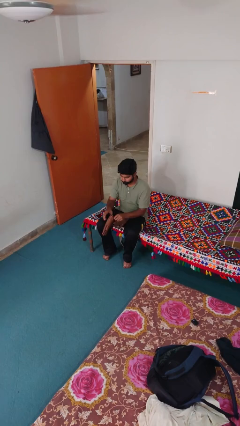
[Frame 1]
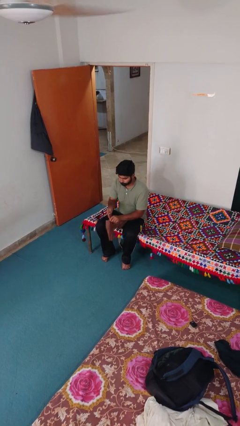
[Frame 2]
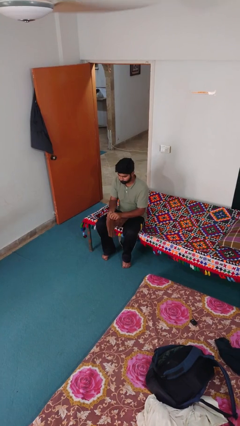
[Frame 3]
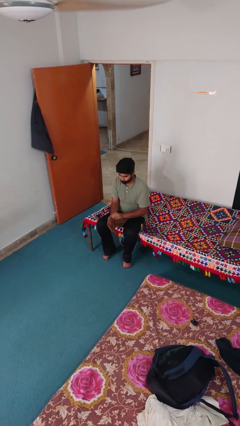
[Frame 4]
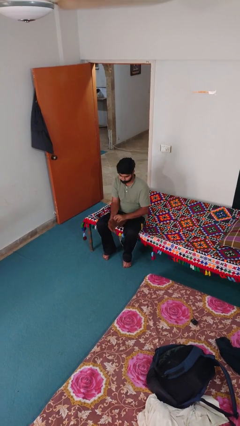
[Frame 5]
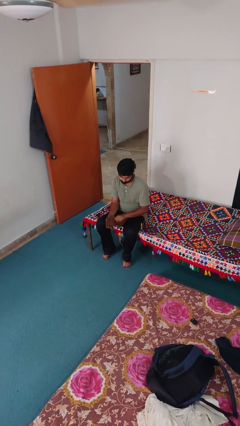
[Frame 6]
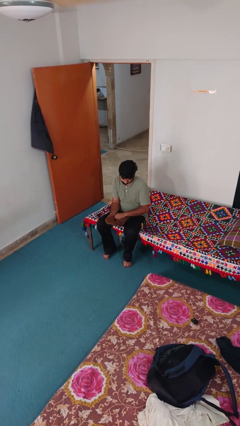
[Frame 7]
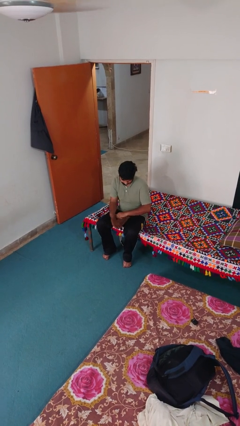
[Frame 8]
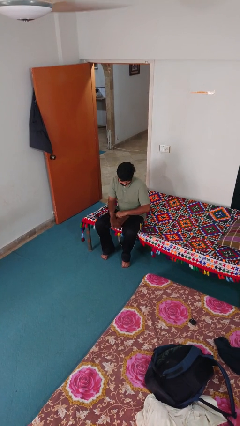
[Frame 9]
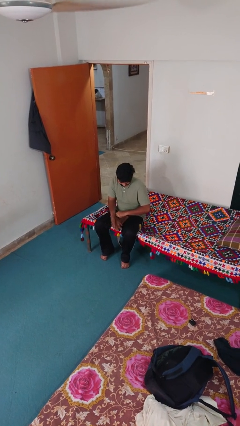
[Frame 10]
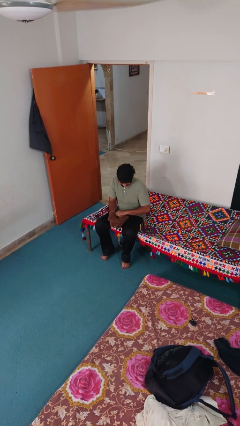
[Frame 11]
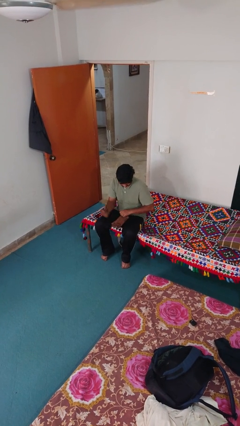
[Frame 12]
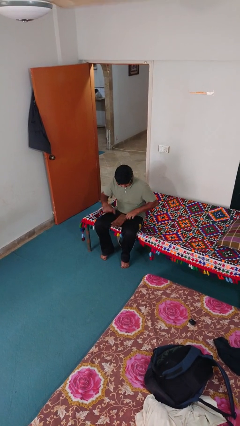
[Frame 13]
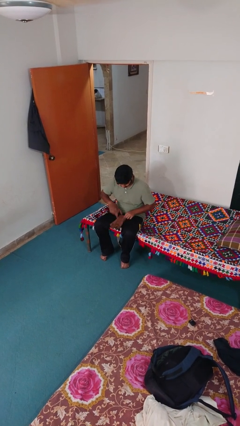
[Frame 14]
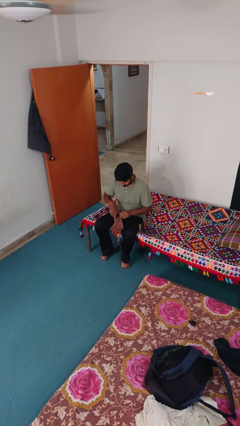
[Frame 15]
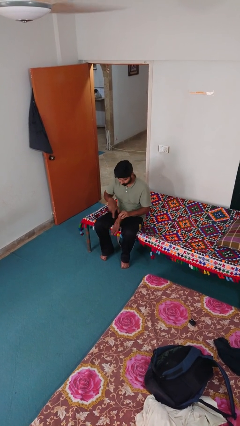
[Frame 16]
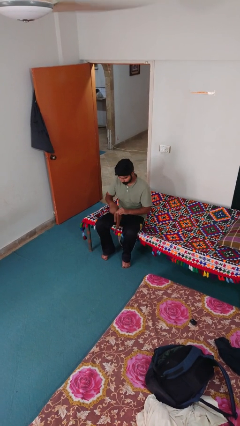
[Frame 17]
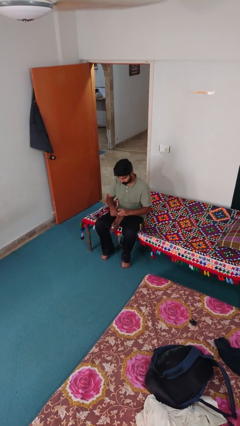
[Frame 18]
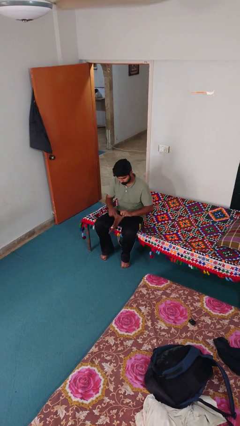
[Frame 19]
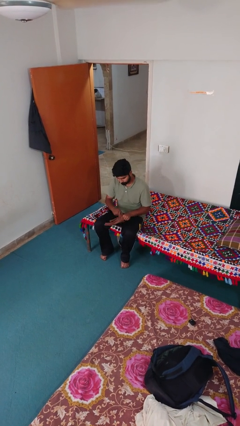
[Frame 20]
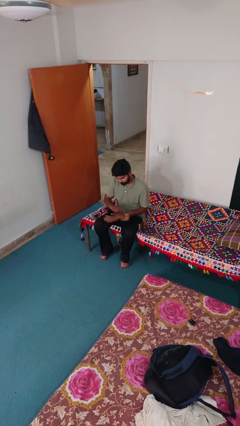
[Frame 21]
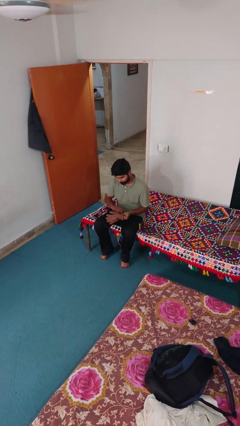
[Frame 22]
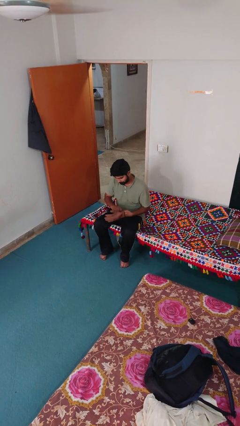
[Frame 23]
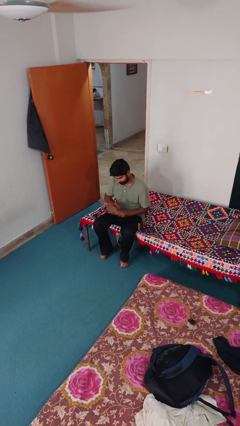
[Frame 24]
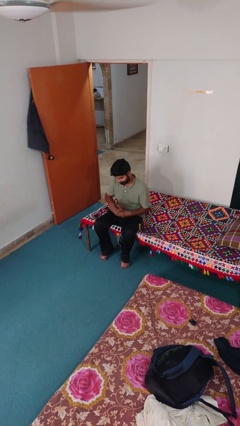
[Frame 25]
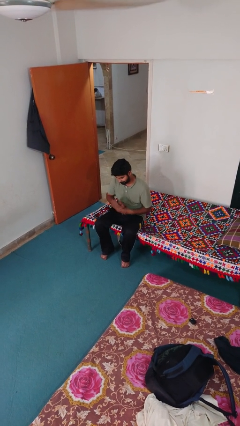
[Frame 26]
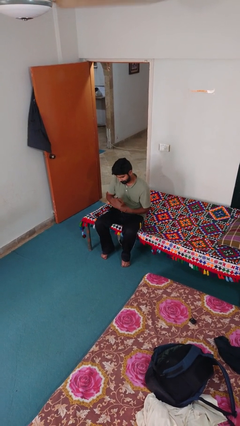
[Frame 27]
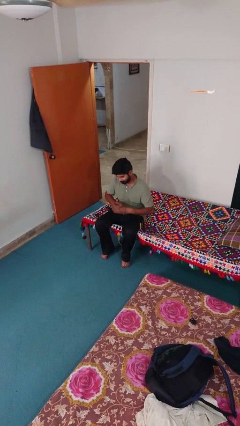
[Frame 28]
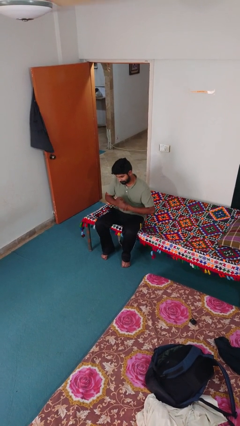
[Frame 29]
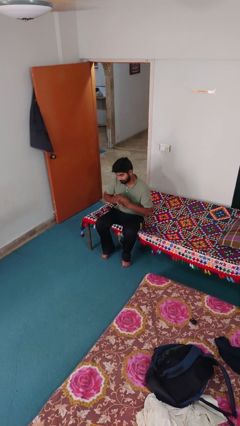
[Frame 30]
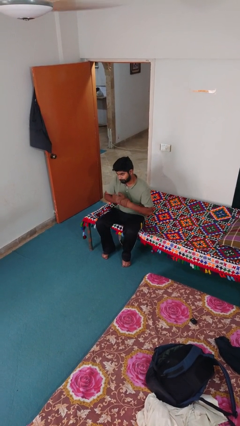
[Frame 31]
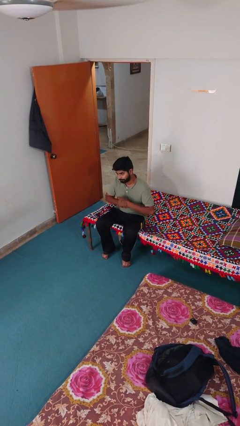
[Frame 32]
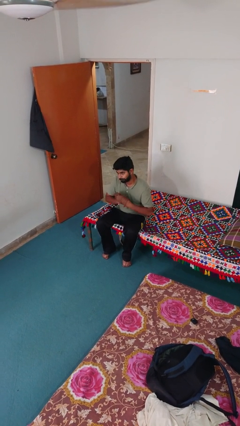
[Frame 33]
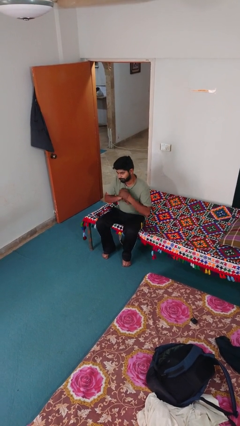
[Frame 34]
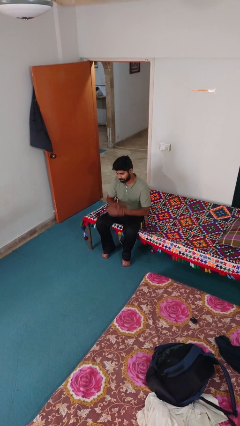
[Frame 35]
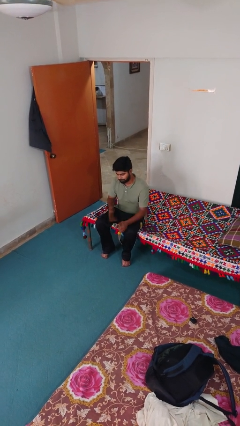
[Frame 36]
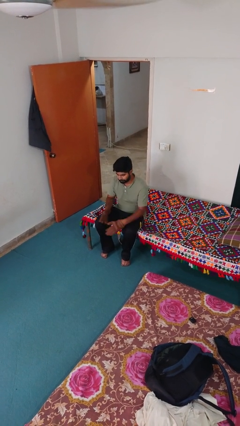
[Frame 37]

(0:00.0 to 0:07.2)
person puts on gloves

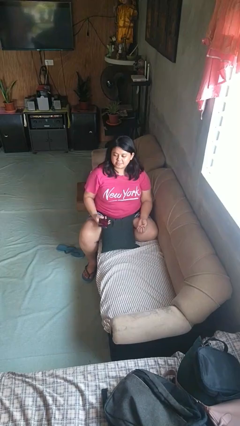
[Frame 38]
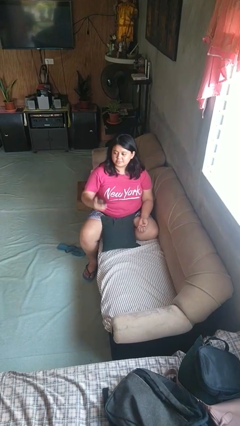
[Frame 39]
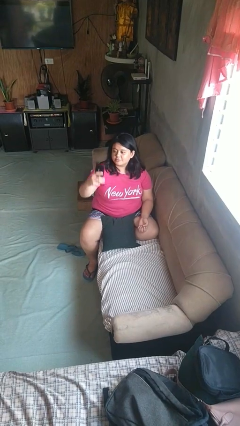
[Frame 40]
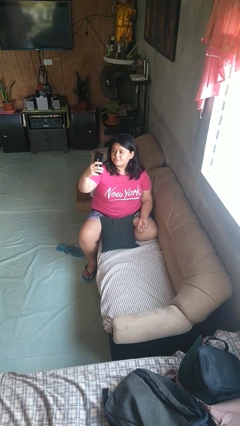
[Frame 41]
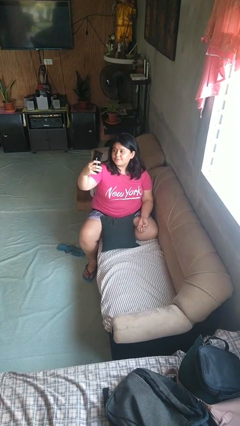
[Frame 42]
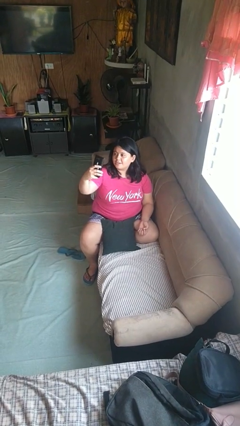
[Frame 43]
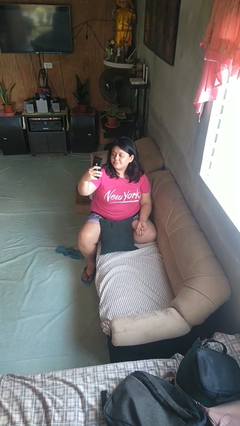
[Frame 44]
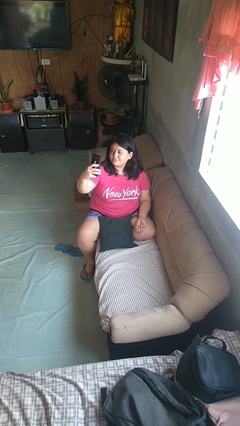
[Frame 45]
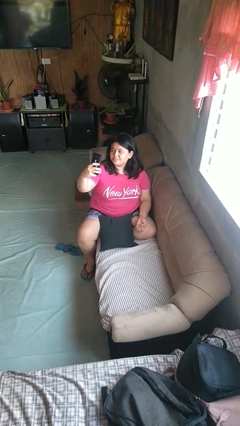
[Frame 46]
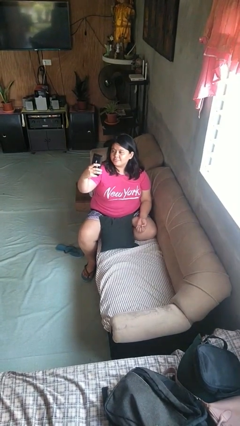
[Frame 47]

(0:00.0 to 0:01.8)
person takes selfie

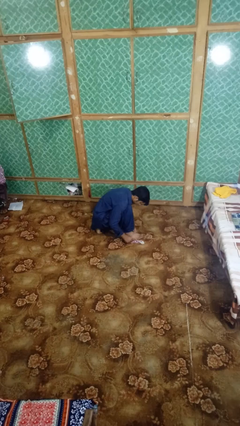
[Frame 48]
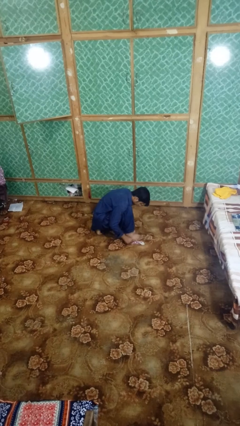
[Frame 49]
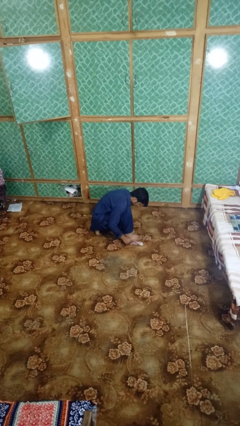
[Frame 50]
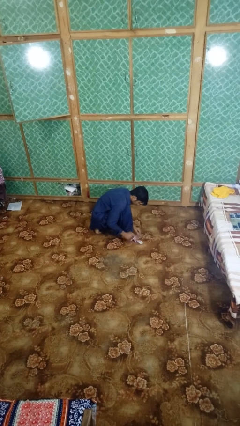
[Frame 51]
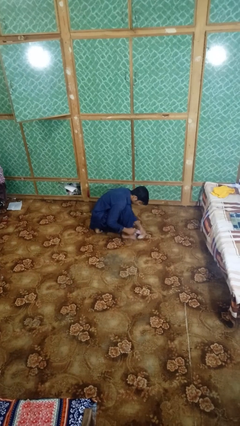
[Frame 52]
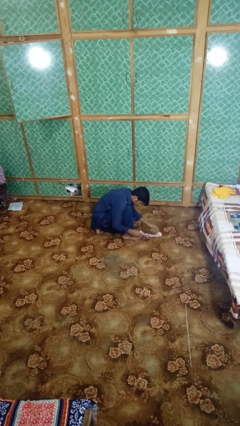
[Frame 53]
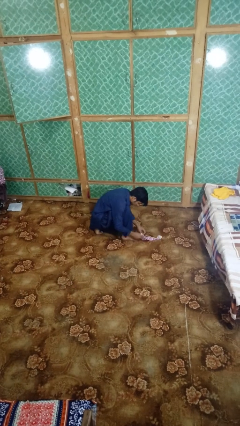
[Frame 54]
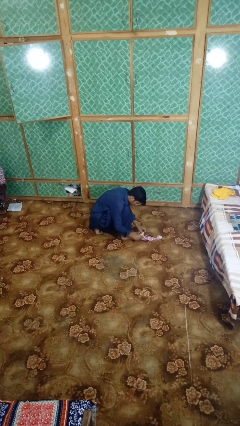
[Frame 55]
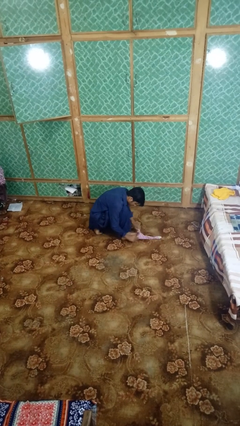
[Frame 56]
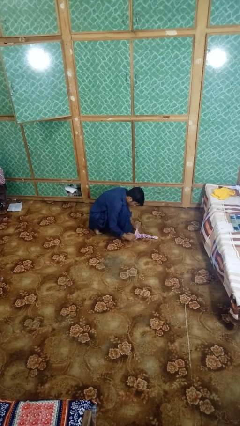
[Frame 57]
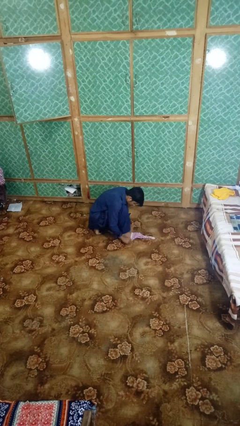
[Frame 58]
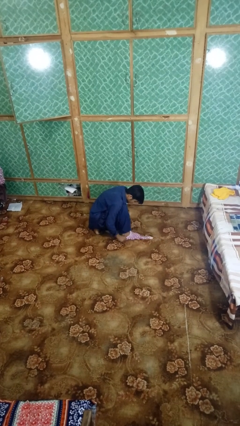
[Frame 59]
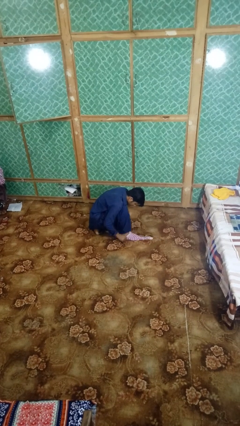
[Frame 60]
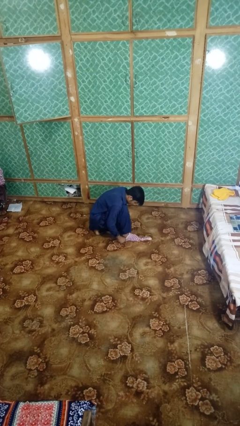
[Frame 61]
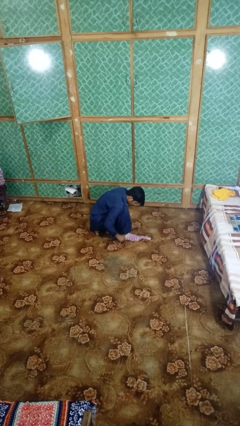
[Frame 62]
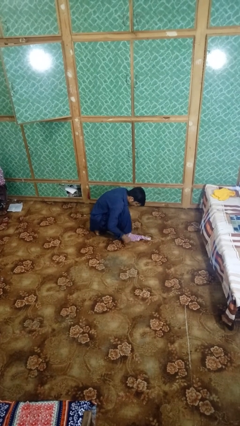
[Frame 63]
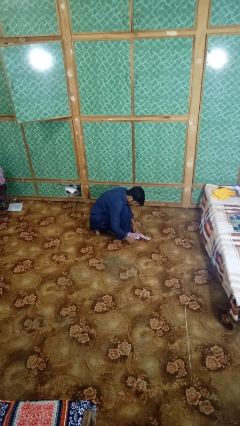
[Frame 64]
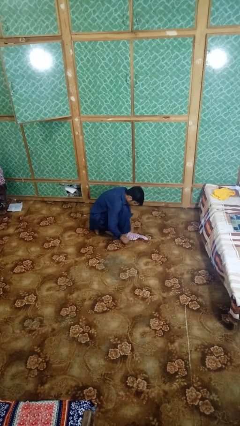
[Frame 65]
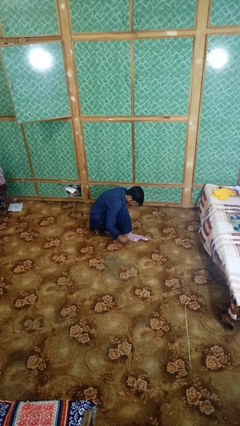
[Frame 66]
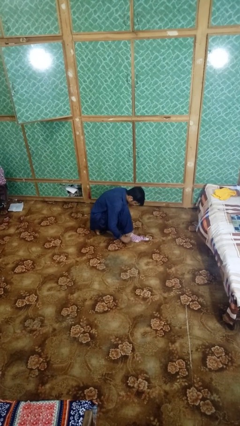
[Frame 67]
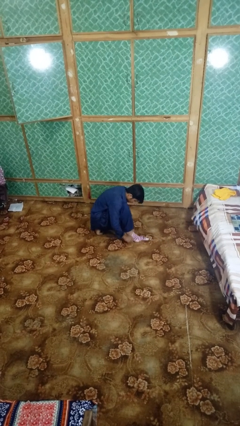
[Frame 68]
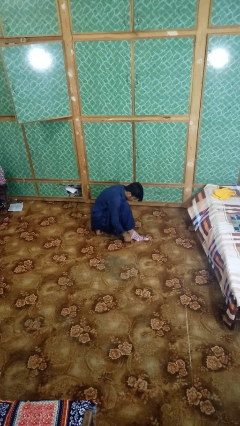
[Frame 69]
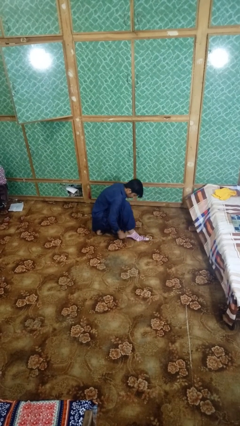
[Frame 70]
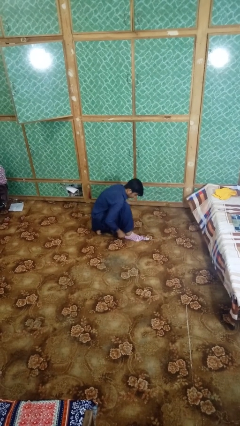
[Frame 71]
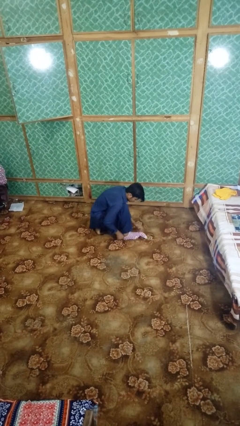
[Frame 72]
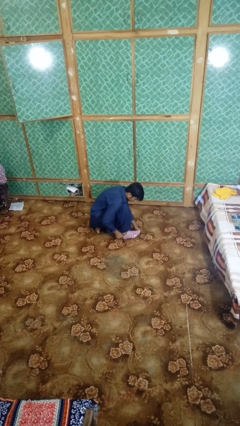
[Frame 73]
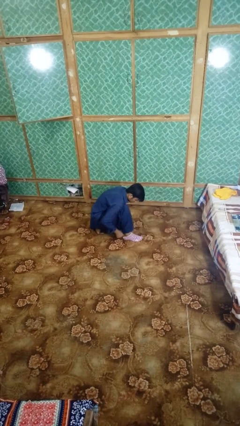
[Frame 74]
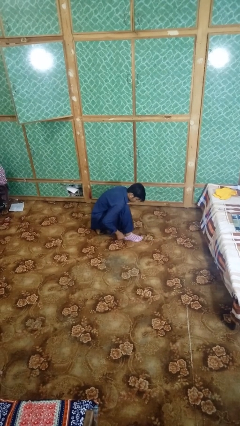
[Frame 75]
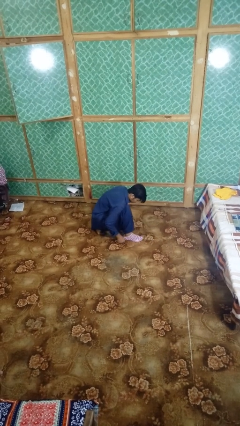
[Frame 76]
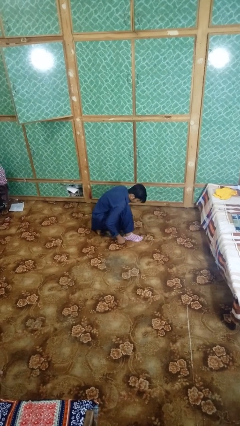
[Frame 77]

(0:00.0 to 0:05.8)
person puts on socks

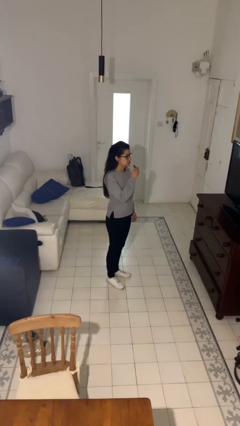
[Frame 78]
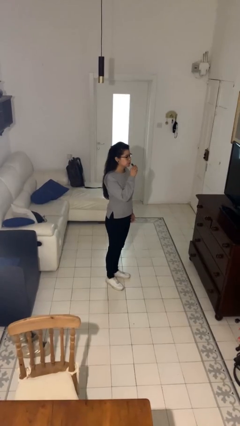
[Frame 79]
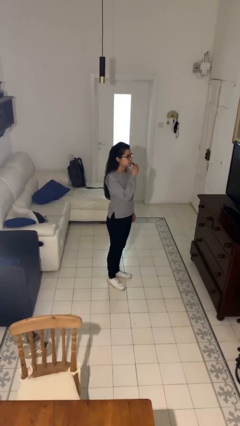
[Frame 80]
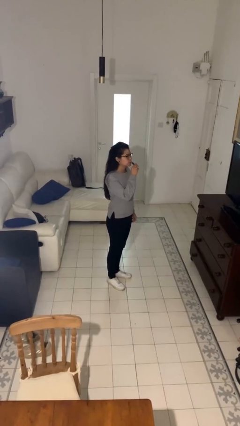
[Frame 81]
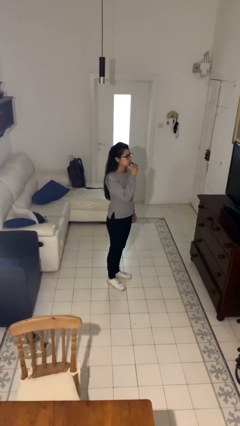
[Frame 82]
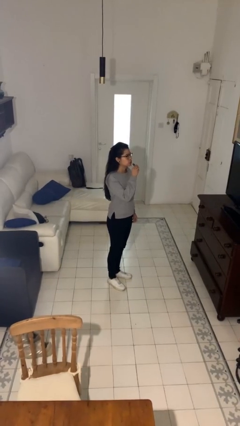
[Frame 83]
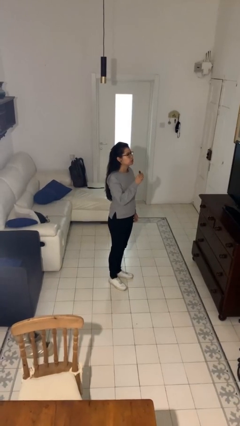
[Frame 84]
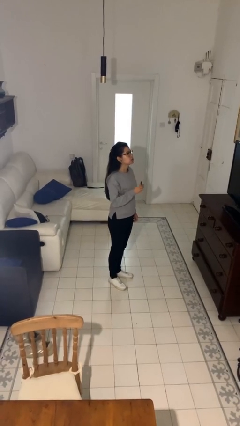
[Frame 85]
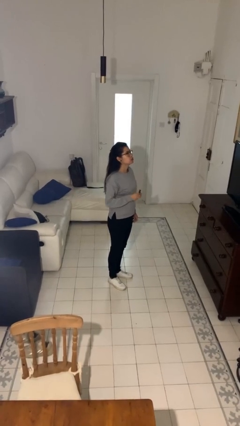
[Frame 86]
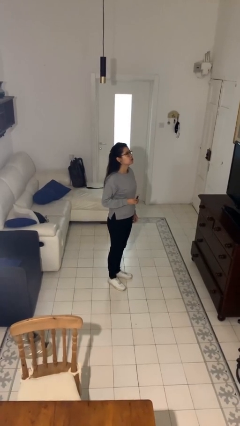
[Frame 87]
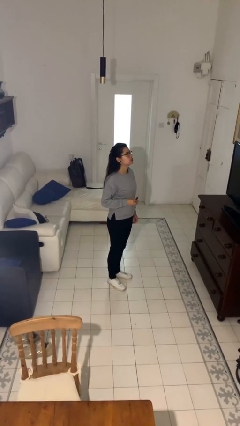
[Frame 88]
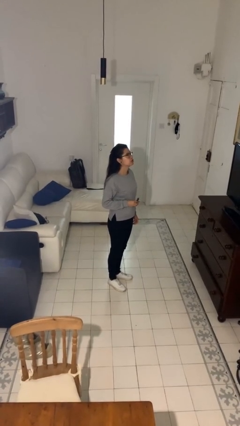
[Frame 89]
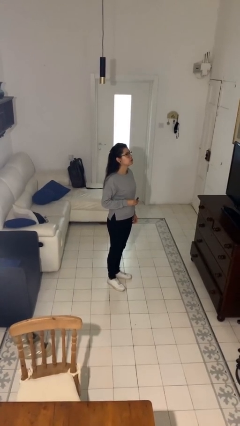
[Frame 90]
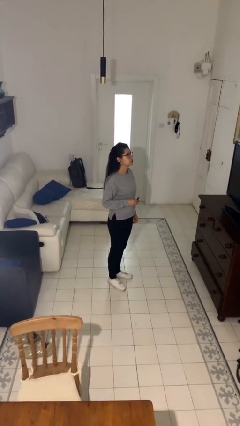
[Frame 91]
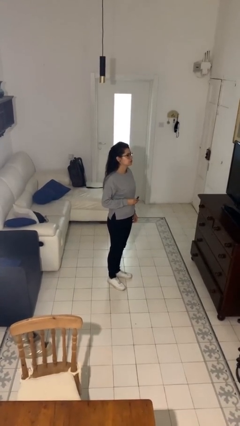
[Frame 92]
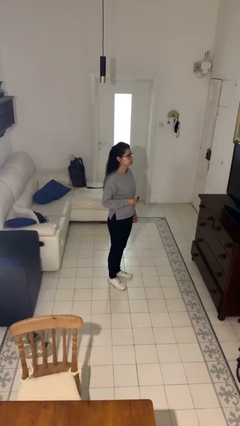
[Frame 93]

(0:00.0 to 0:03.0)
person vapes

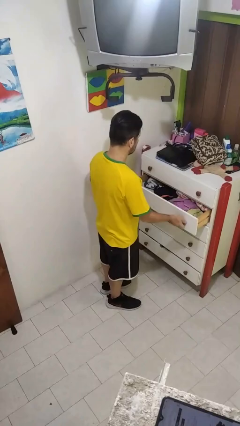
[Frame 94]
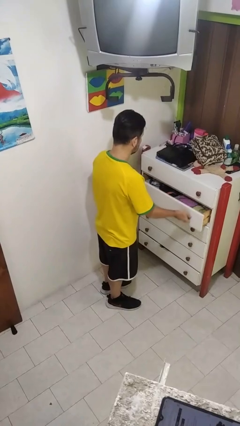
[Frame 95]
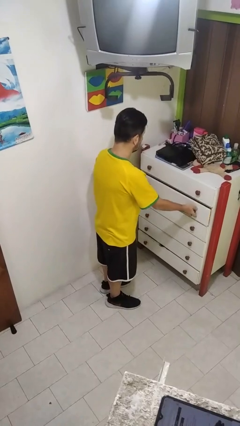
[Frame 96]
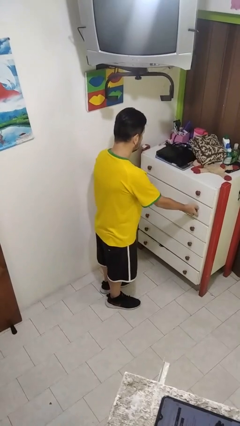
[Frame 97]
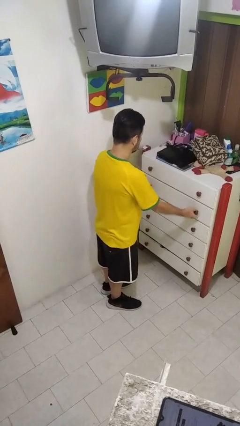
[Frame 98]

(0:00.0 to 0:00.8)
person closes dresser drawer
